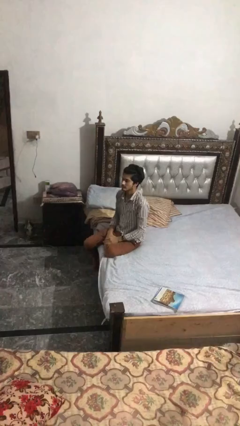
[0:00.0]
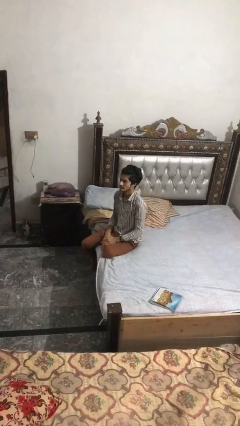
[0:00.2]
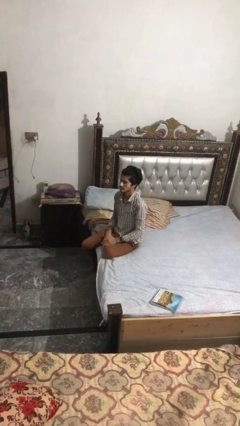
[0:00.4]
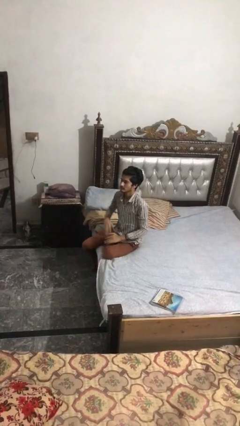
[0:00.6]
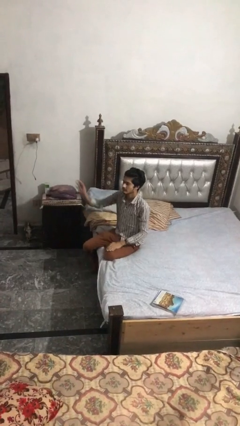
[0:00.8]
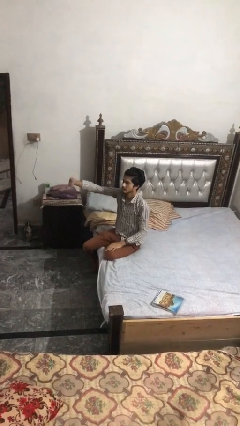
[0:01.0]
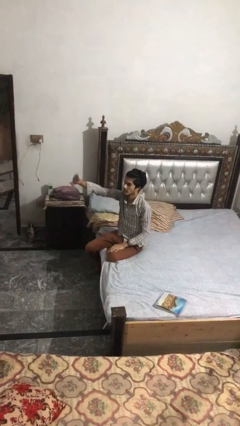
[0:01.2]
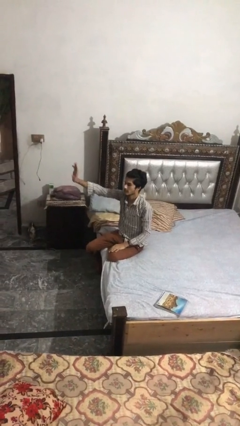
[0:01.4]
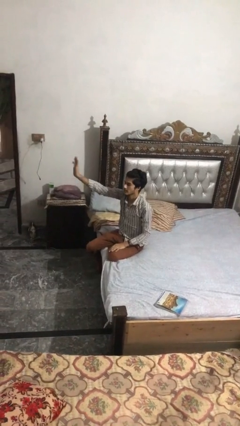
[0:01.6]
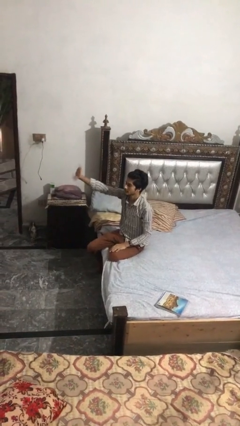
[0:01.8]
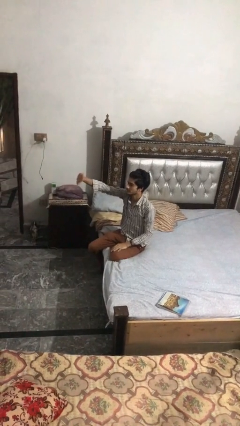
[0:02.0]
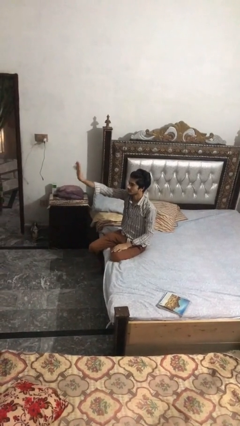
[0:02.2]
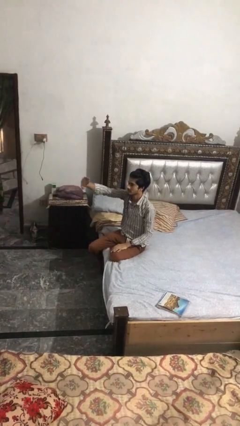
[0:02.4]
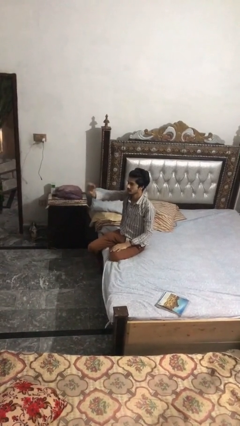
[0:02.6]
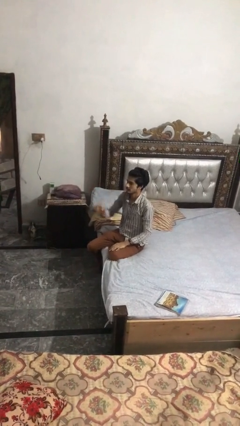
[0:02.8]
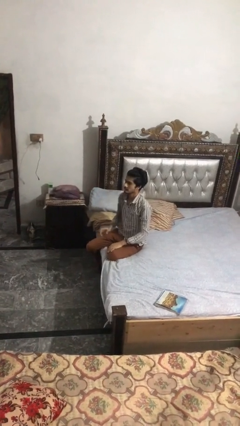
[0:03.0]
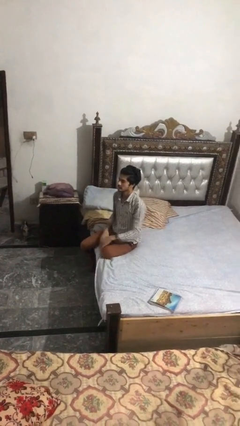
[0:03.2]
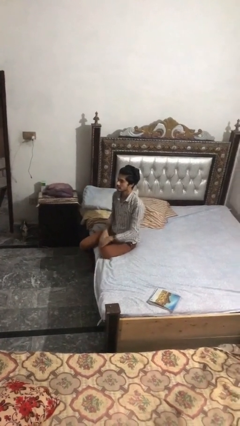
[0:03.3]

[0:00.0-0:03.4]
person waves at person

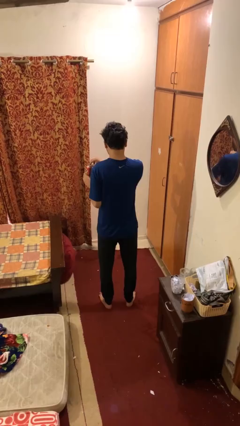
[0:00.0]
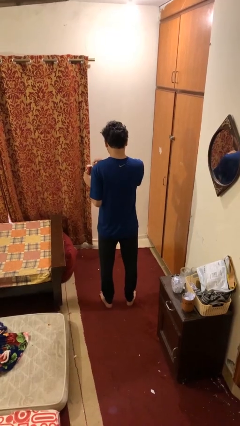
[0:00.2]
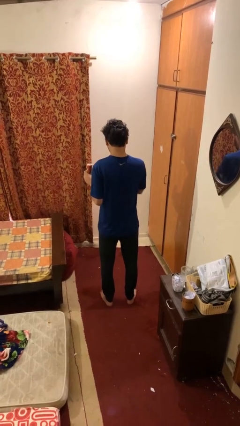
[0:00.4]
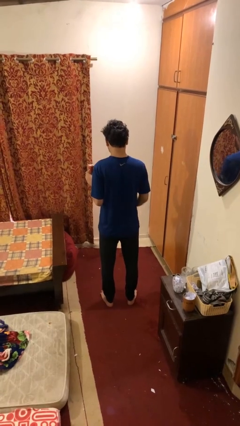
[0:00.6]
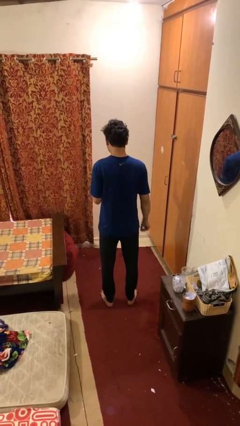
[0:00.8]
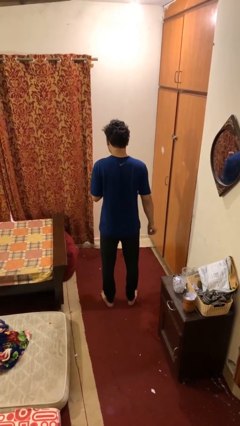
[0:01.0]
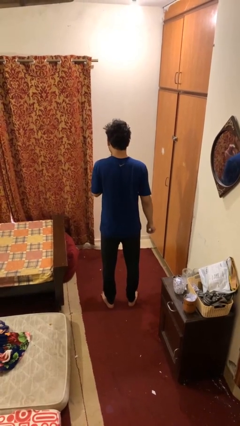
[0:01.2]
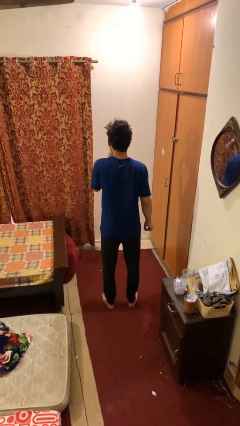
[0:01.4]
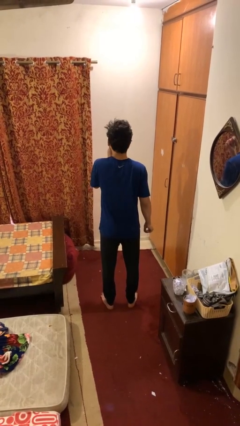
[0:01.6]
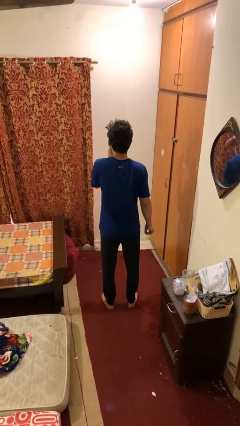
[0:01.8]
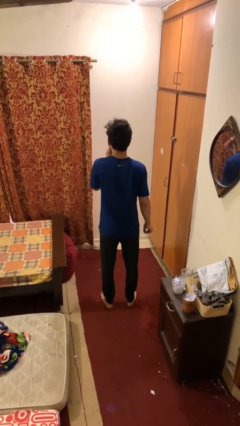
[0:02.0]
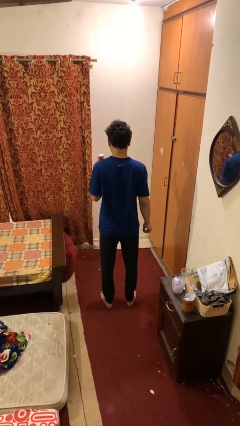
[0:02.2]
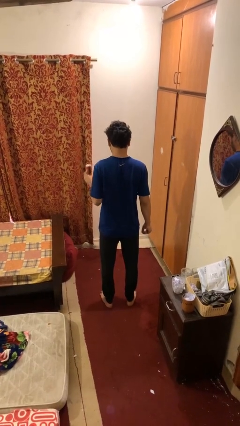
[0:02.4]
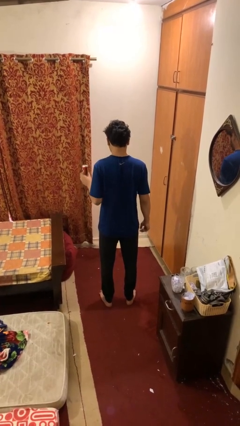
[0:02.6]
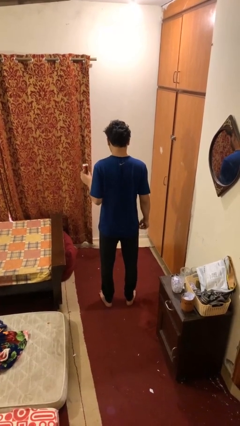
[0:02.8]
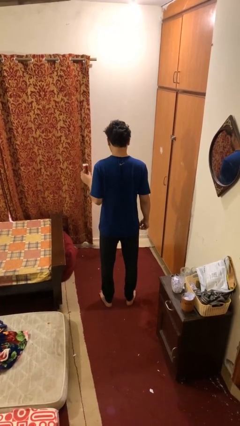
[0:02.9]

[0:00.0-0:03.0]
person drinks from beverage can

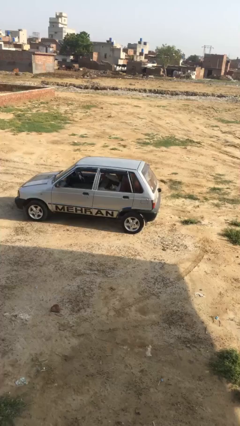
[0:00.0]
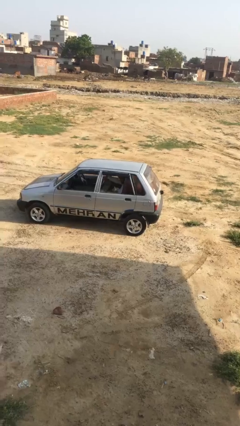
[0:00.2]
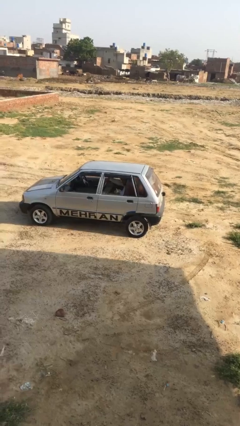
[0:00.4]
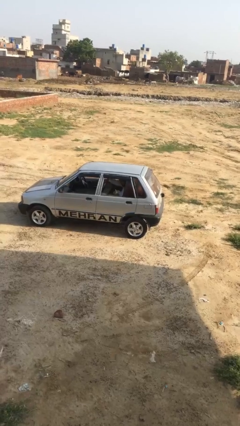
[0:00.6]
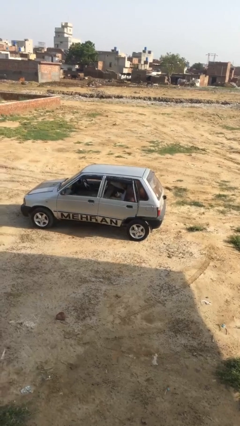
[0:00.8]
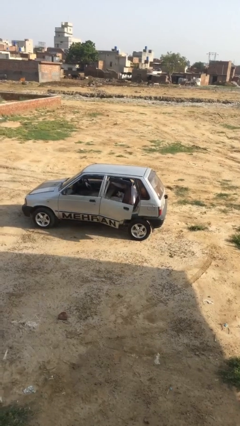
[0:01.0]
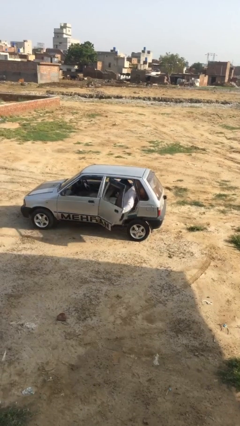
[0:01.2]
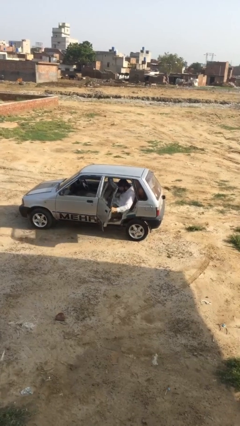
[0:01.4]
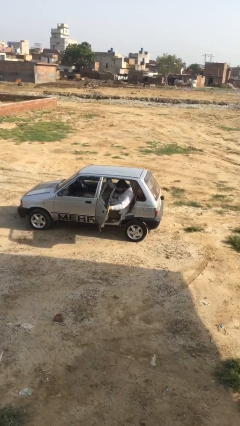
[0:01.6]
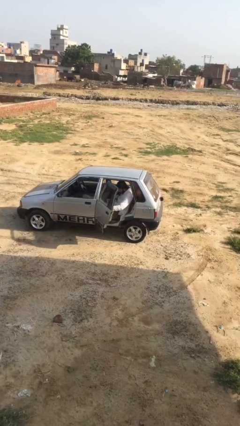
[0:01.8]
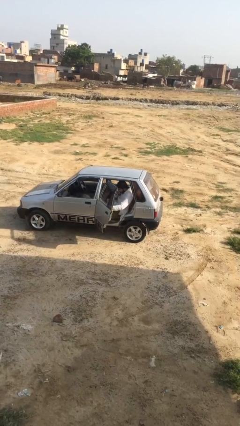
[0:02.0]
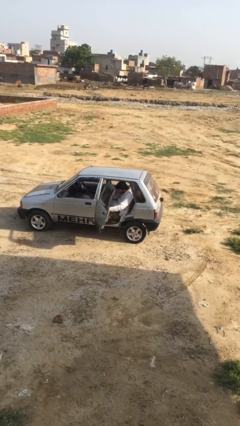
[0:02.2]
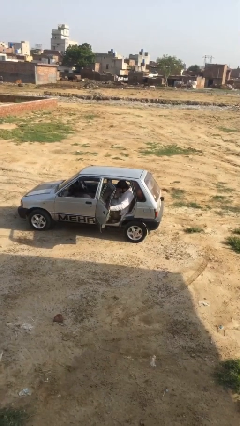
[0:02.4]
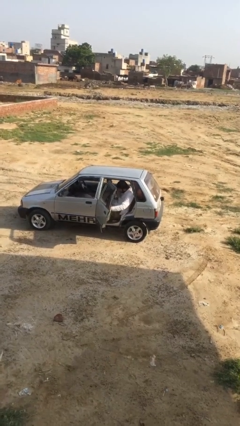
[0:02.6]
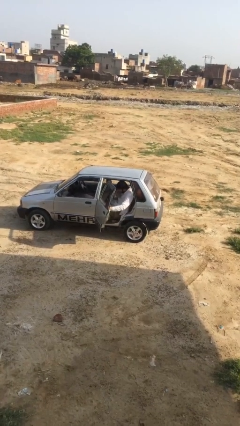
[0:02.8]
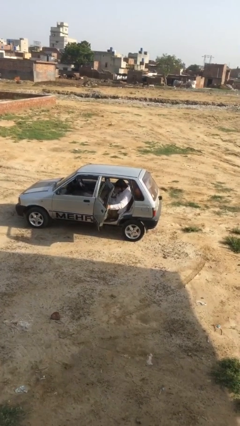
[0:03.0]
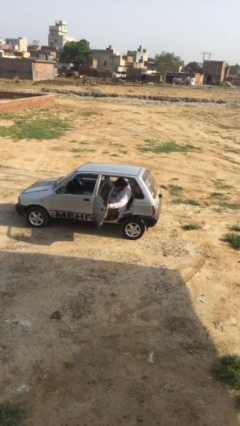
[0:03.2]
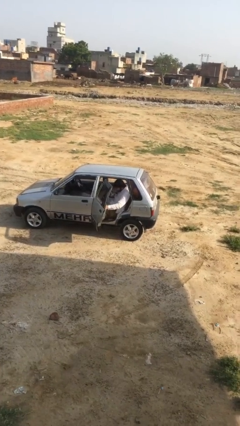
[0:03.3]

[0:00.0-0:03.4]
person opens car door

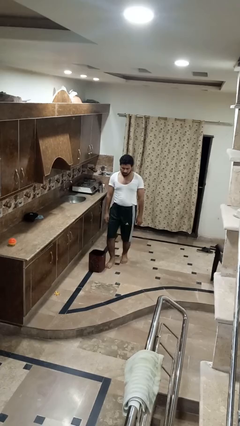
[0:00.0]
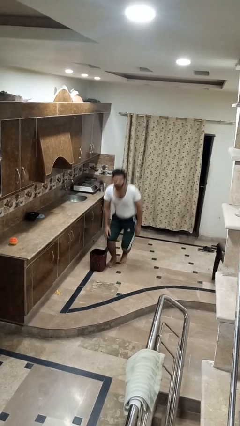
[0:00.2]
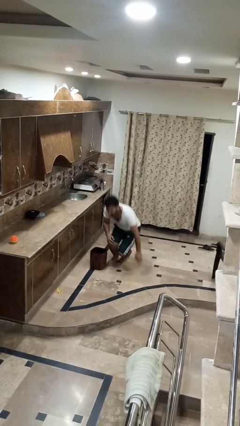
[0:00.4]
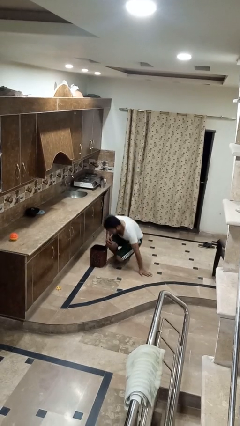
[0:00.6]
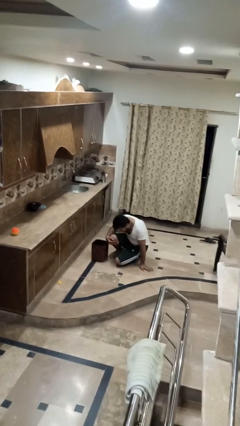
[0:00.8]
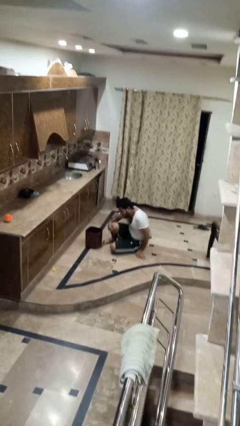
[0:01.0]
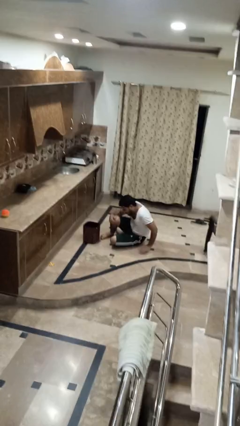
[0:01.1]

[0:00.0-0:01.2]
person trips on object on floor

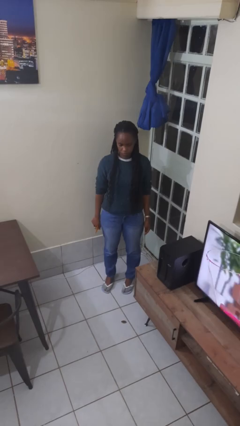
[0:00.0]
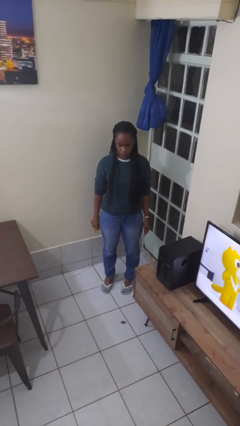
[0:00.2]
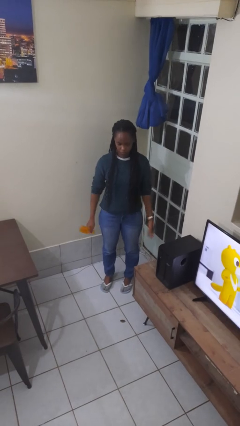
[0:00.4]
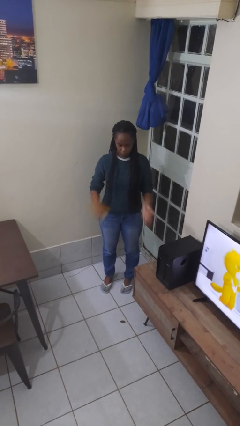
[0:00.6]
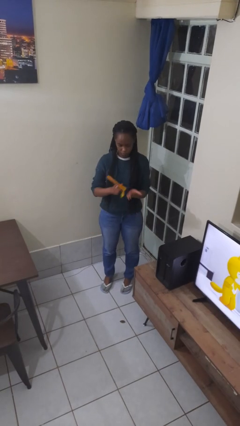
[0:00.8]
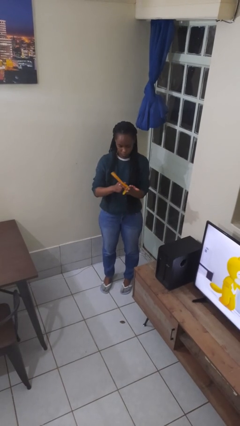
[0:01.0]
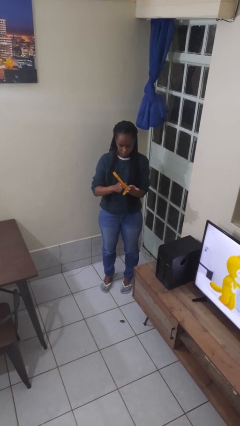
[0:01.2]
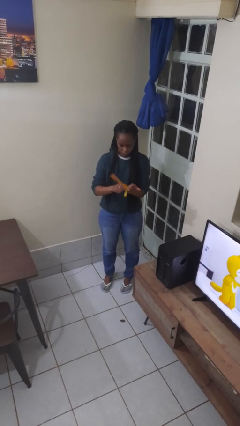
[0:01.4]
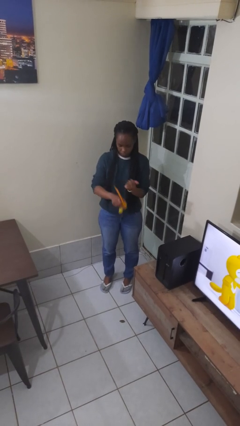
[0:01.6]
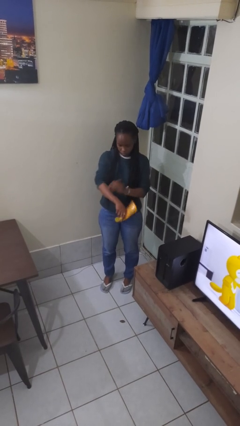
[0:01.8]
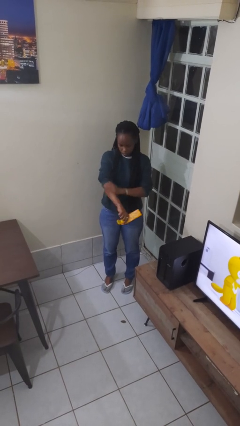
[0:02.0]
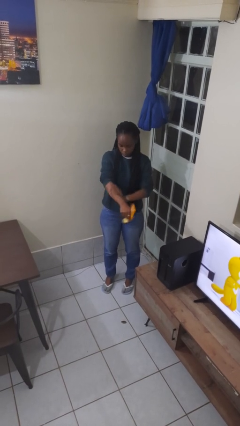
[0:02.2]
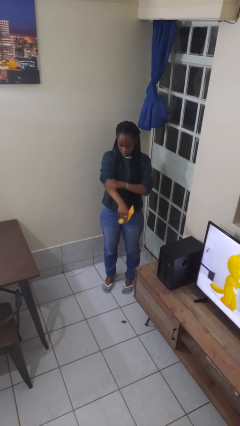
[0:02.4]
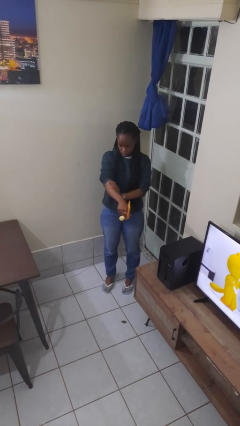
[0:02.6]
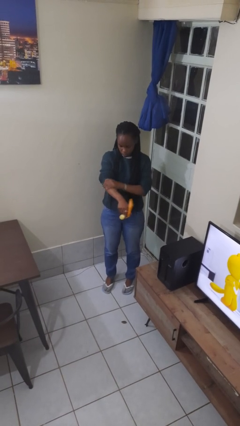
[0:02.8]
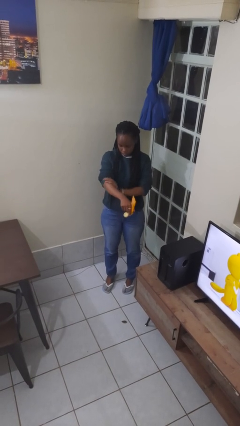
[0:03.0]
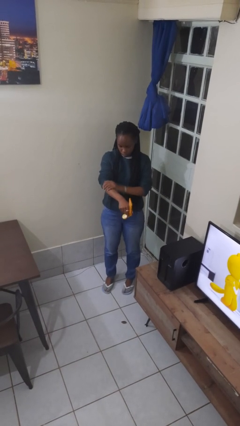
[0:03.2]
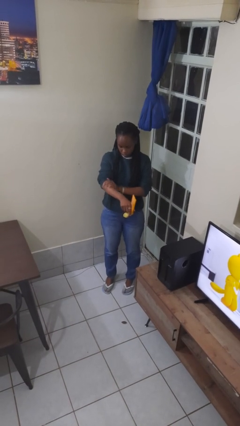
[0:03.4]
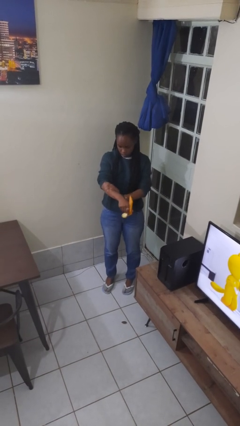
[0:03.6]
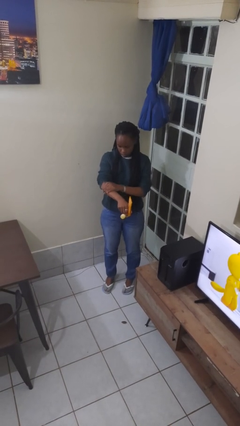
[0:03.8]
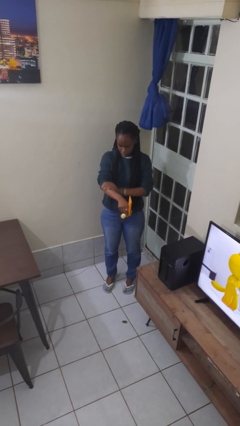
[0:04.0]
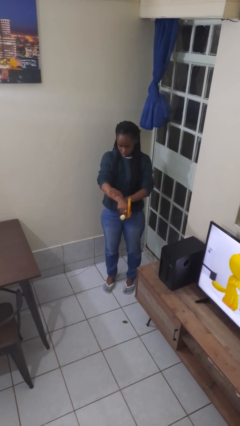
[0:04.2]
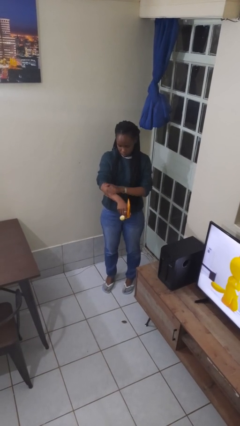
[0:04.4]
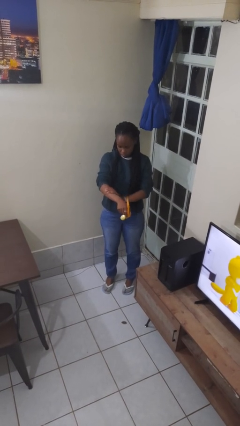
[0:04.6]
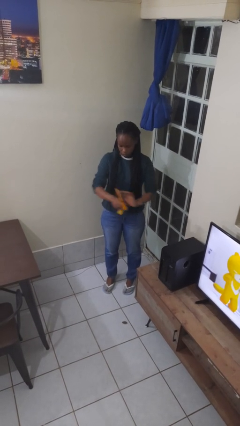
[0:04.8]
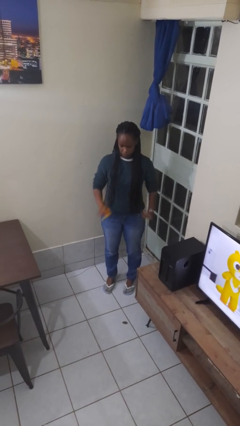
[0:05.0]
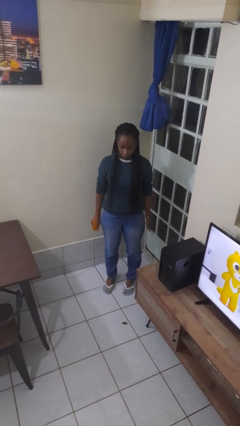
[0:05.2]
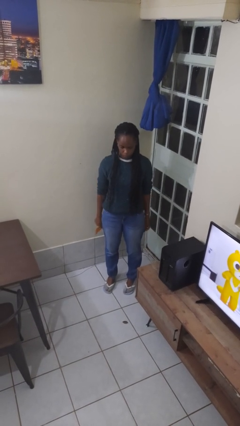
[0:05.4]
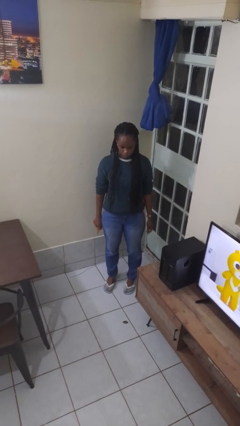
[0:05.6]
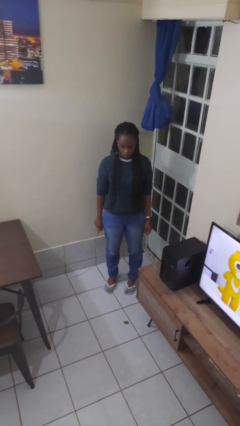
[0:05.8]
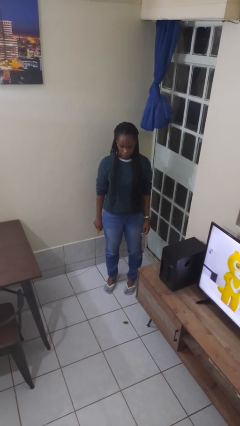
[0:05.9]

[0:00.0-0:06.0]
person applies sunscreen

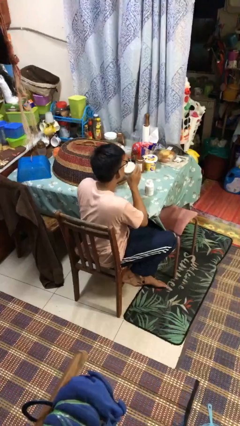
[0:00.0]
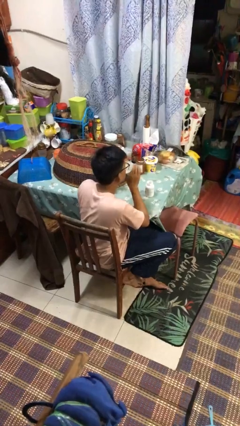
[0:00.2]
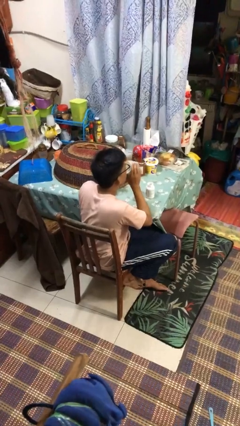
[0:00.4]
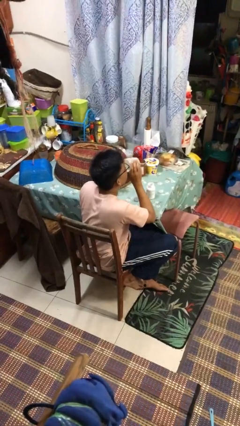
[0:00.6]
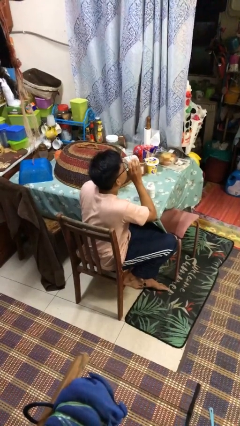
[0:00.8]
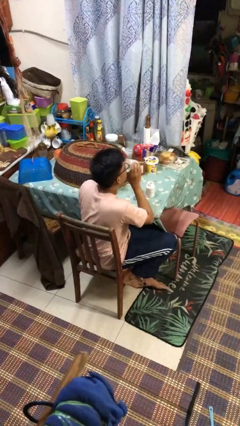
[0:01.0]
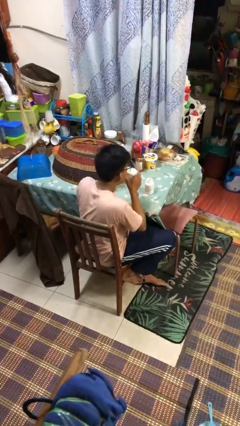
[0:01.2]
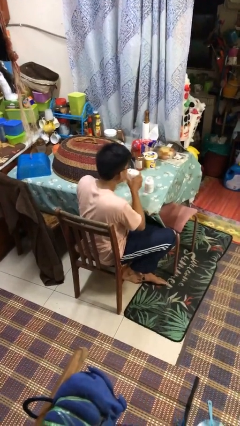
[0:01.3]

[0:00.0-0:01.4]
person drinks from cup
